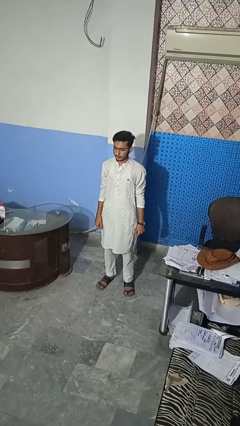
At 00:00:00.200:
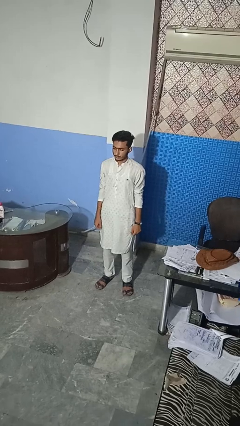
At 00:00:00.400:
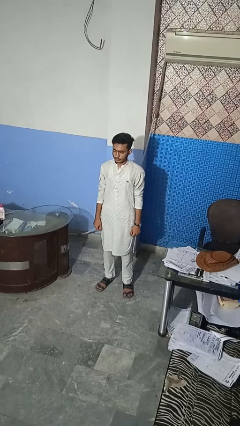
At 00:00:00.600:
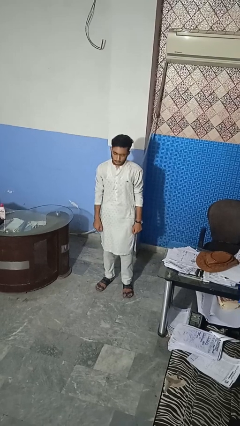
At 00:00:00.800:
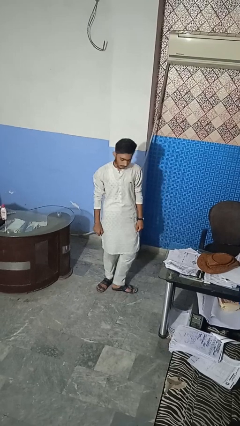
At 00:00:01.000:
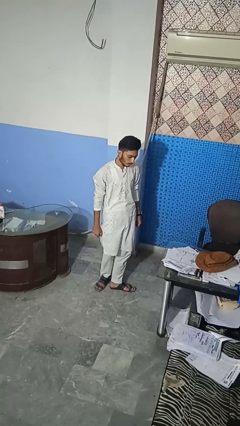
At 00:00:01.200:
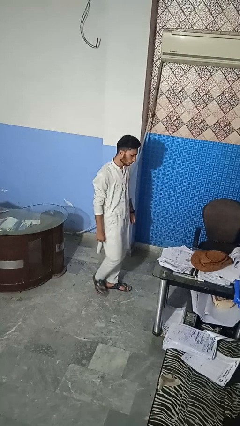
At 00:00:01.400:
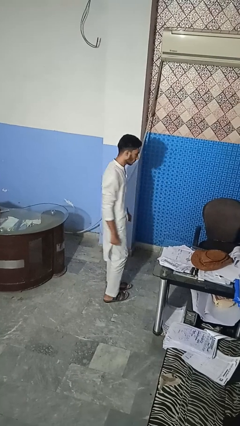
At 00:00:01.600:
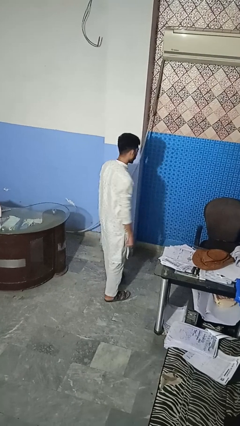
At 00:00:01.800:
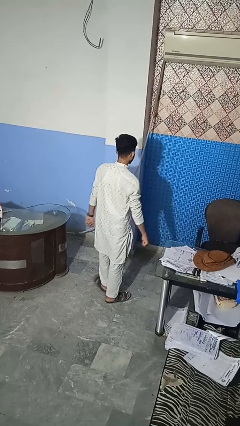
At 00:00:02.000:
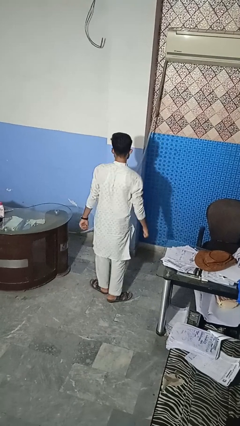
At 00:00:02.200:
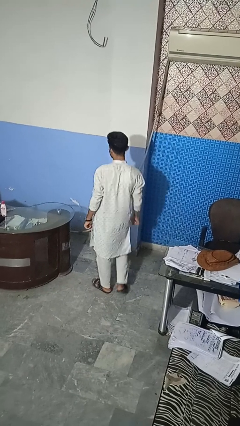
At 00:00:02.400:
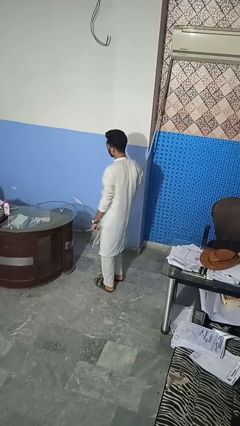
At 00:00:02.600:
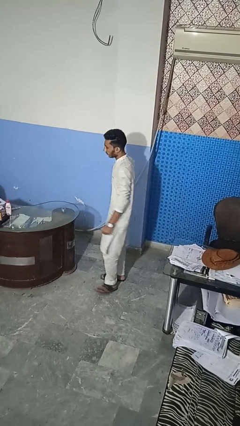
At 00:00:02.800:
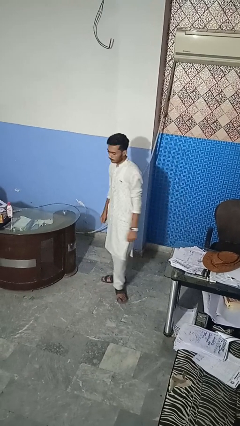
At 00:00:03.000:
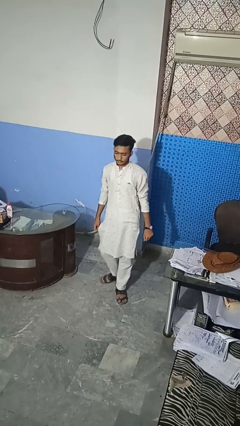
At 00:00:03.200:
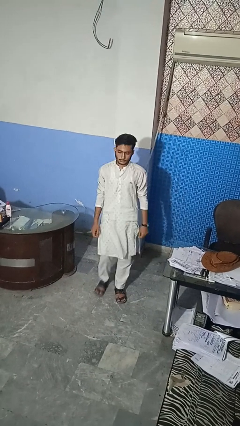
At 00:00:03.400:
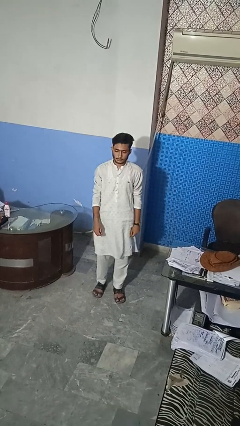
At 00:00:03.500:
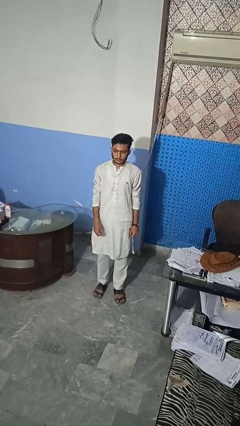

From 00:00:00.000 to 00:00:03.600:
person twirls

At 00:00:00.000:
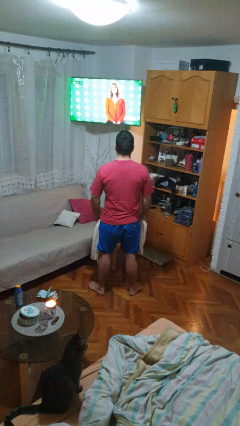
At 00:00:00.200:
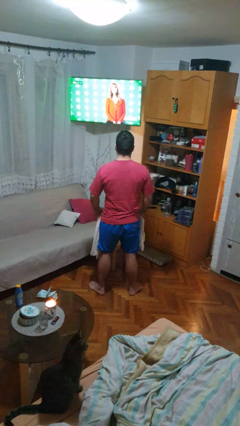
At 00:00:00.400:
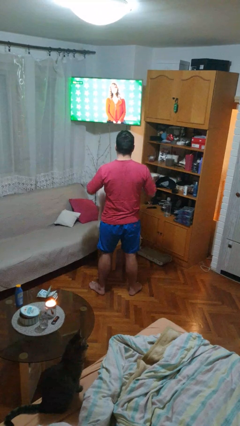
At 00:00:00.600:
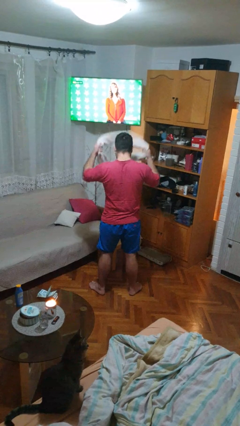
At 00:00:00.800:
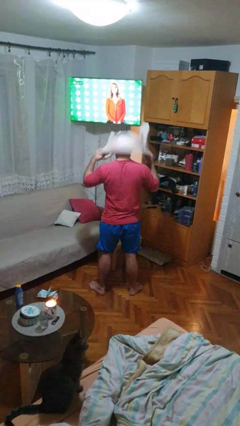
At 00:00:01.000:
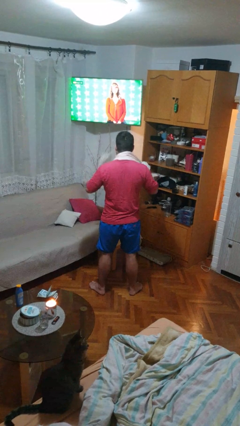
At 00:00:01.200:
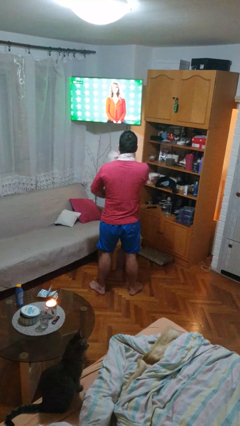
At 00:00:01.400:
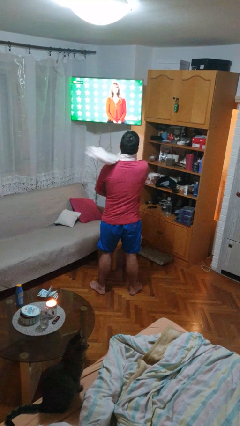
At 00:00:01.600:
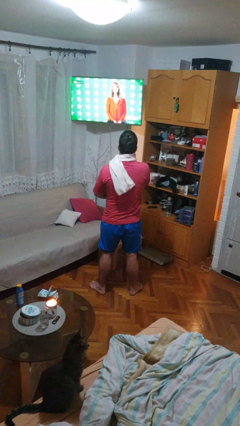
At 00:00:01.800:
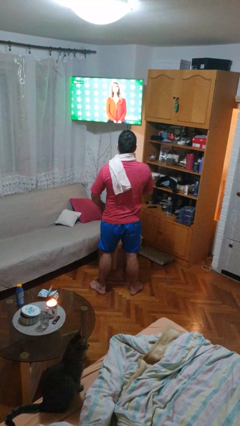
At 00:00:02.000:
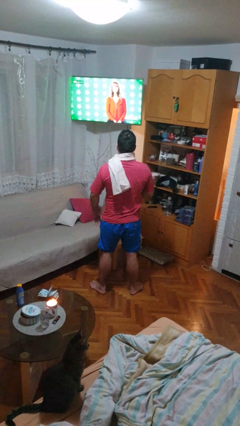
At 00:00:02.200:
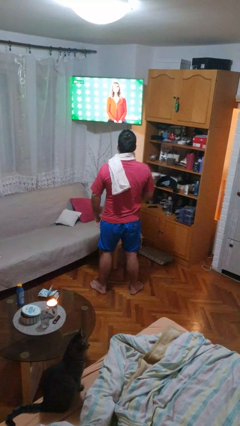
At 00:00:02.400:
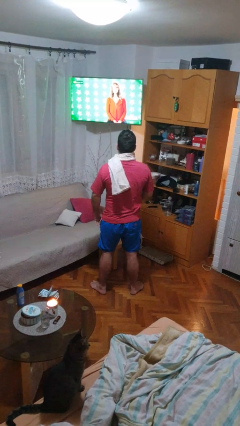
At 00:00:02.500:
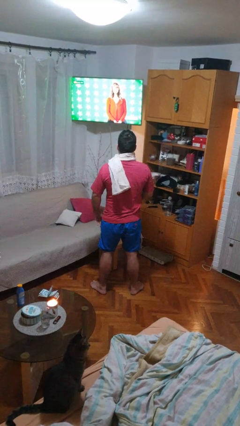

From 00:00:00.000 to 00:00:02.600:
person puts on scarf

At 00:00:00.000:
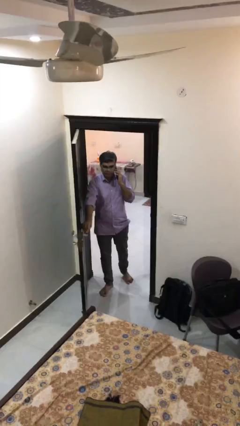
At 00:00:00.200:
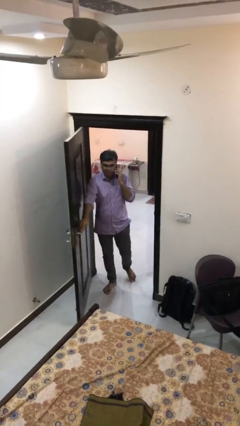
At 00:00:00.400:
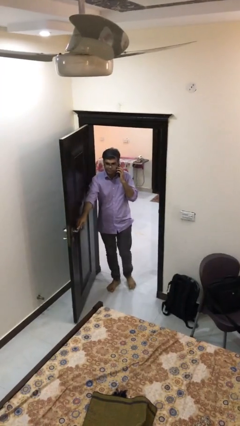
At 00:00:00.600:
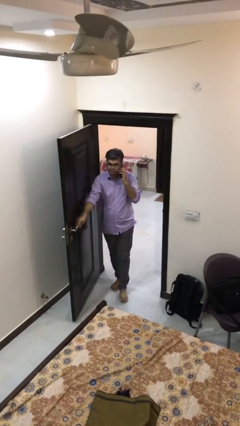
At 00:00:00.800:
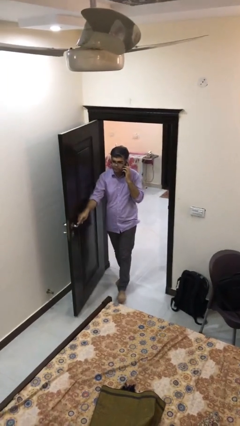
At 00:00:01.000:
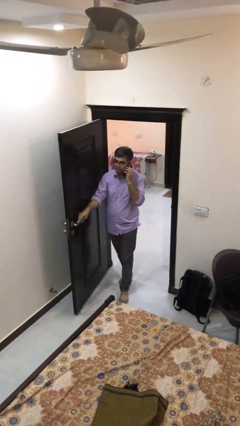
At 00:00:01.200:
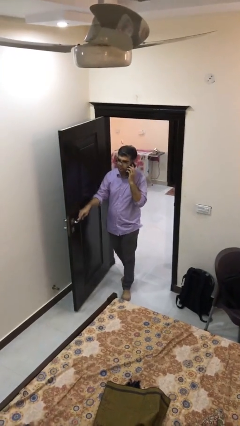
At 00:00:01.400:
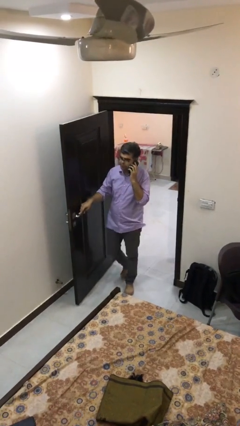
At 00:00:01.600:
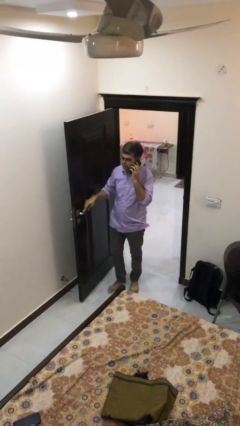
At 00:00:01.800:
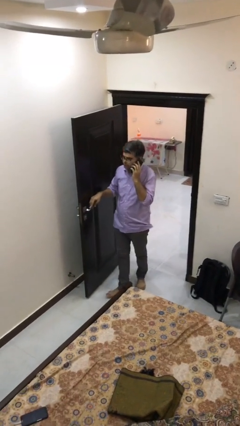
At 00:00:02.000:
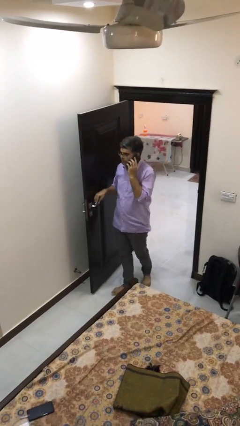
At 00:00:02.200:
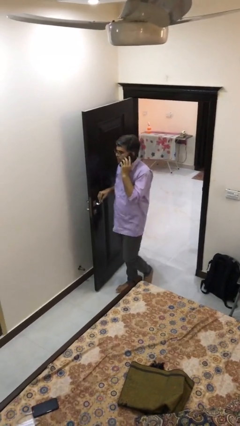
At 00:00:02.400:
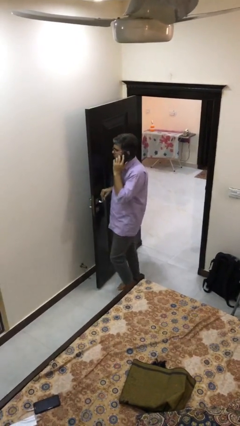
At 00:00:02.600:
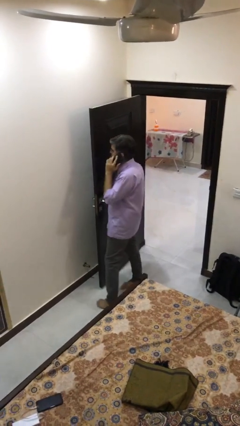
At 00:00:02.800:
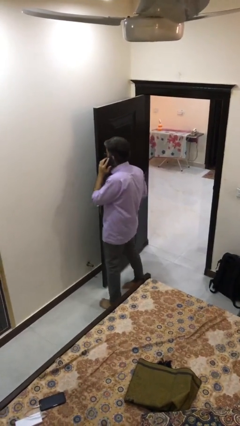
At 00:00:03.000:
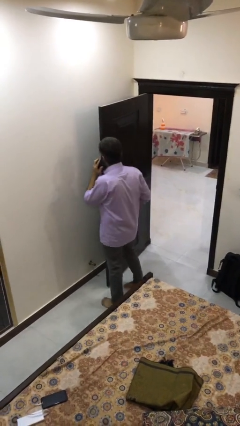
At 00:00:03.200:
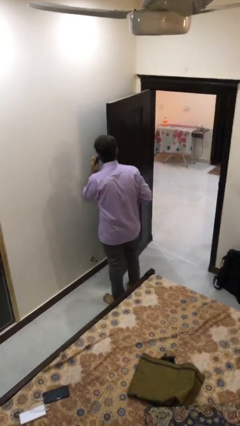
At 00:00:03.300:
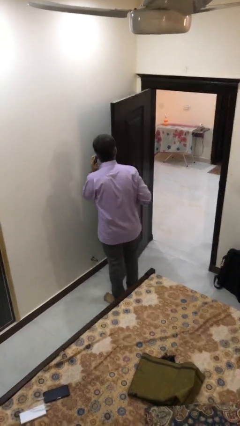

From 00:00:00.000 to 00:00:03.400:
person enters scene through structure

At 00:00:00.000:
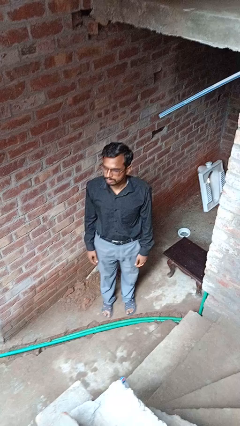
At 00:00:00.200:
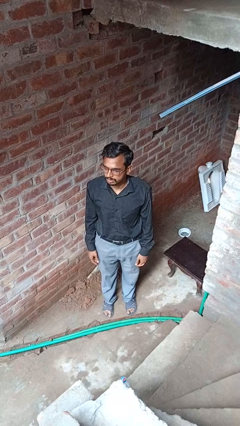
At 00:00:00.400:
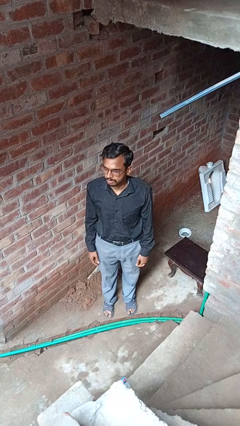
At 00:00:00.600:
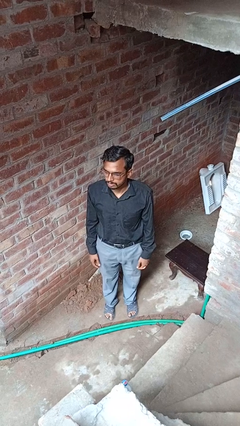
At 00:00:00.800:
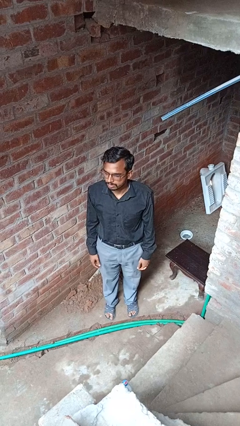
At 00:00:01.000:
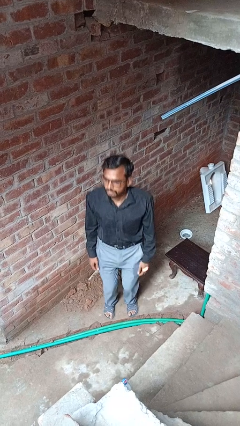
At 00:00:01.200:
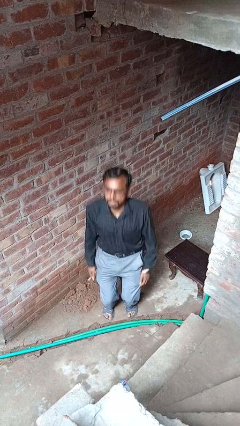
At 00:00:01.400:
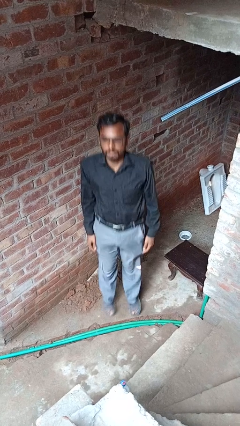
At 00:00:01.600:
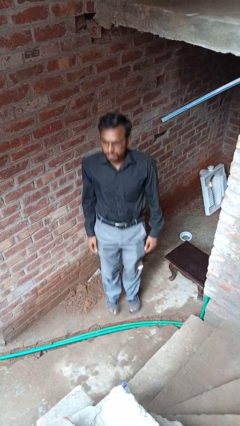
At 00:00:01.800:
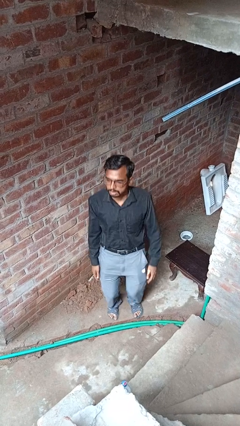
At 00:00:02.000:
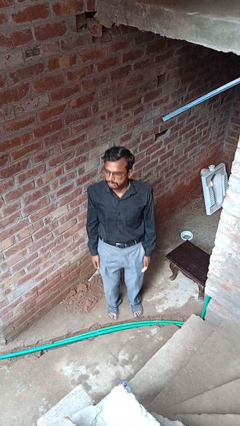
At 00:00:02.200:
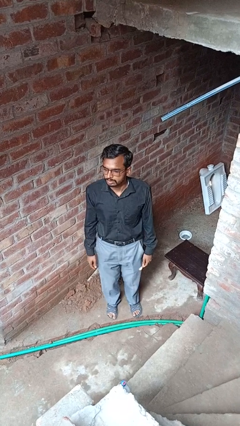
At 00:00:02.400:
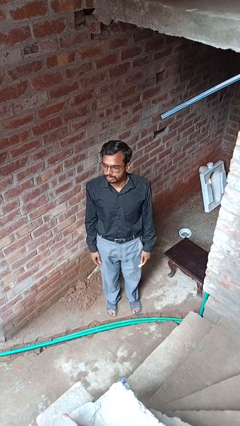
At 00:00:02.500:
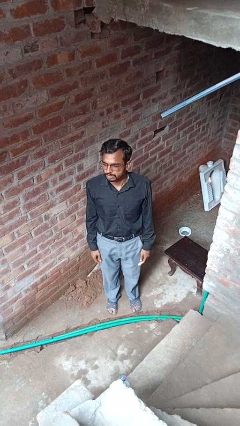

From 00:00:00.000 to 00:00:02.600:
person jumps

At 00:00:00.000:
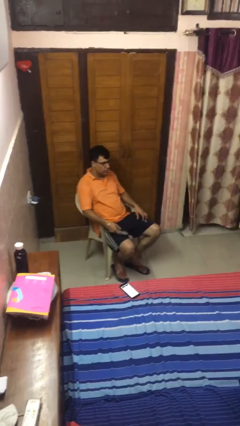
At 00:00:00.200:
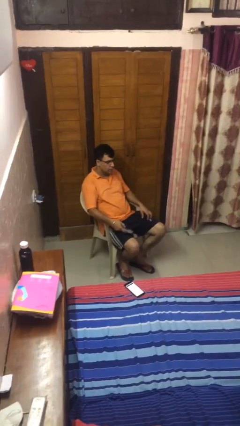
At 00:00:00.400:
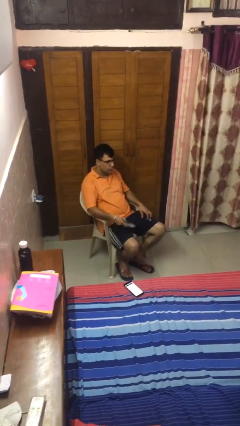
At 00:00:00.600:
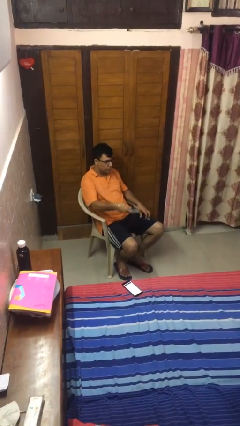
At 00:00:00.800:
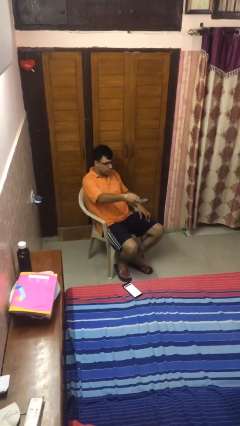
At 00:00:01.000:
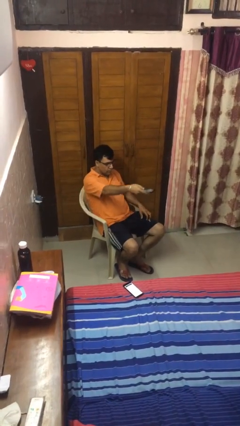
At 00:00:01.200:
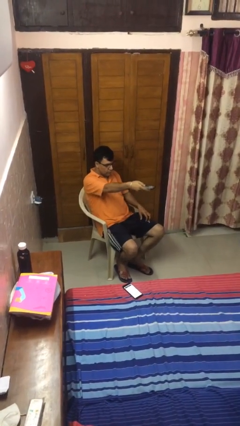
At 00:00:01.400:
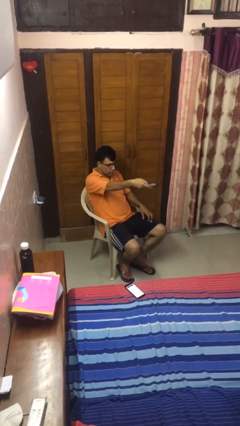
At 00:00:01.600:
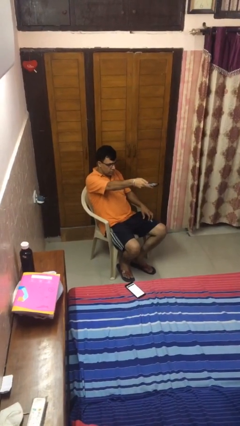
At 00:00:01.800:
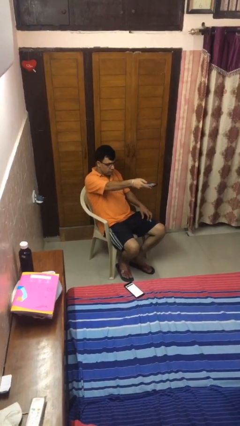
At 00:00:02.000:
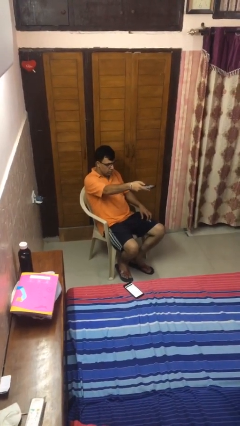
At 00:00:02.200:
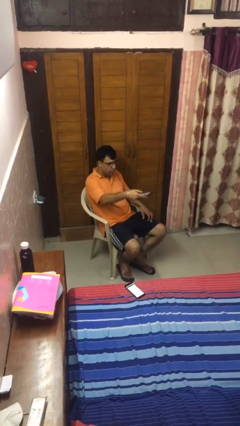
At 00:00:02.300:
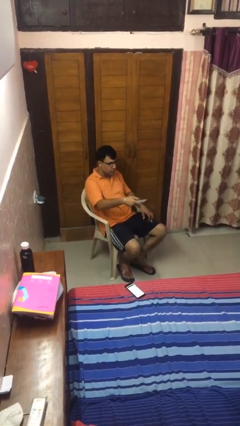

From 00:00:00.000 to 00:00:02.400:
person uses television remote

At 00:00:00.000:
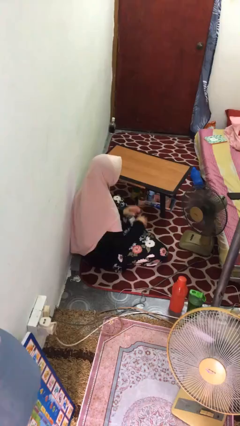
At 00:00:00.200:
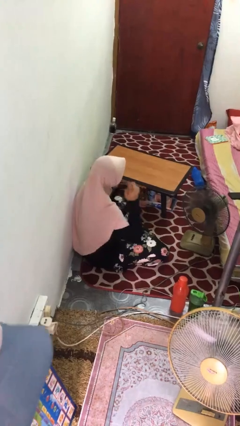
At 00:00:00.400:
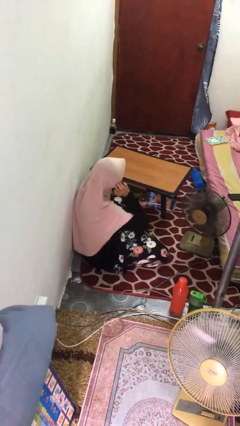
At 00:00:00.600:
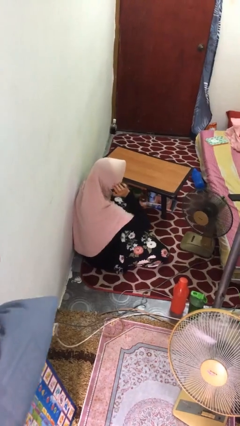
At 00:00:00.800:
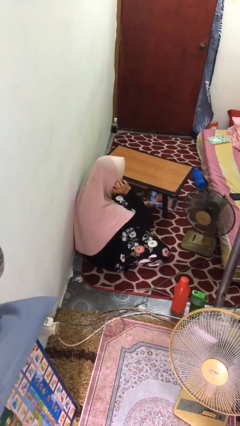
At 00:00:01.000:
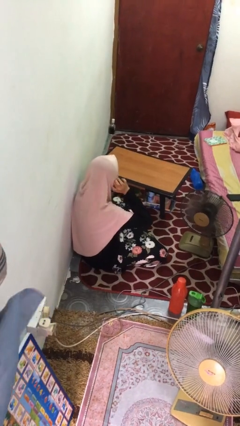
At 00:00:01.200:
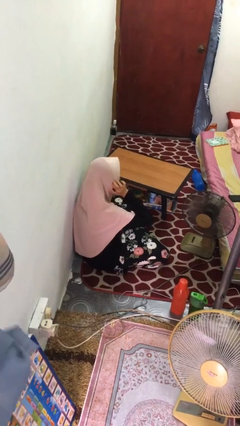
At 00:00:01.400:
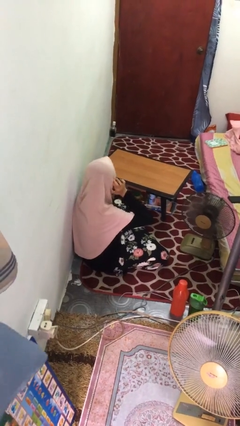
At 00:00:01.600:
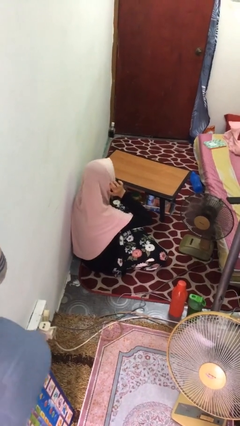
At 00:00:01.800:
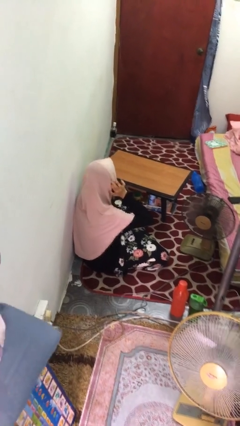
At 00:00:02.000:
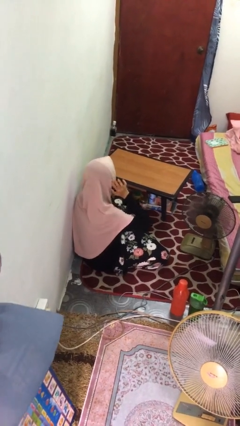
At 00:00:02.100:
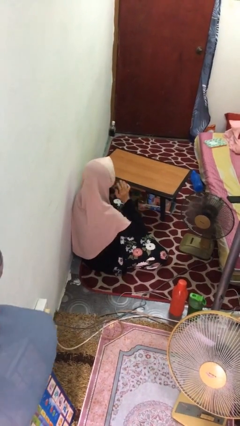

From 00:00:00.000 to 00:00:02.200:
person puts fingers in ear

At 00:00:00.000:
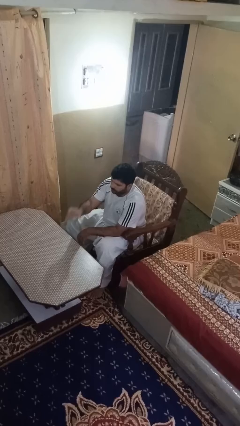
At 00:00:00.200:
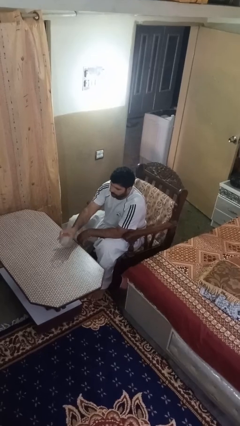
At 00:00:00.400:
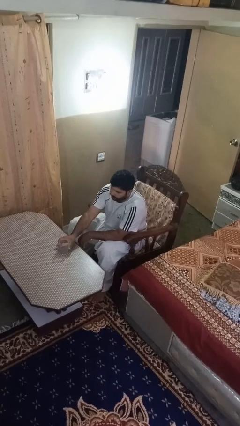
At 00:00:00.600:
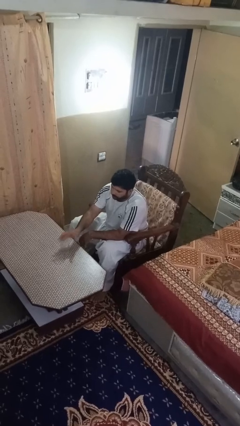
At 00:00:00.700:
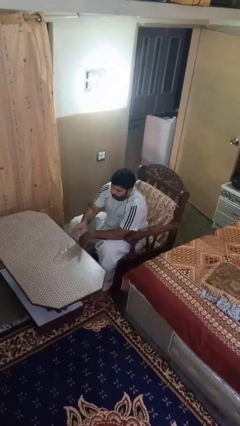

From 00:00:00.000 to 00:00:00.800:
person puts down object on table
